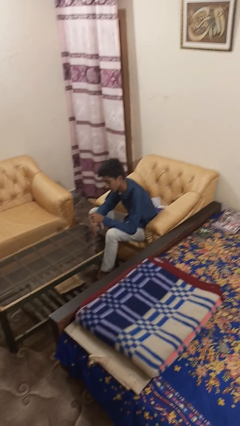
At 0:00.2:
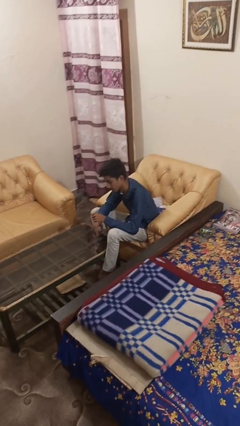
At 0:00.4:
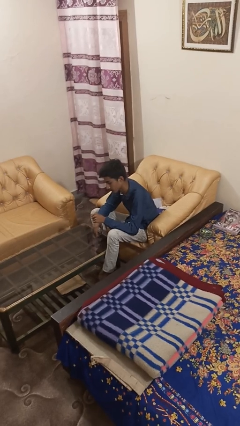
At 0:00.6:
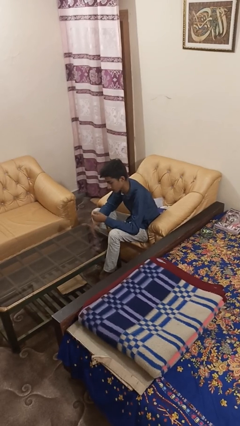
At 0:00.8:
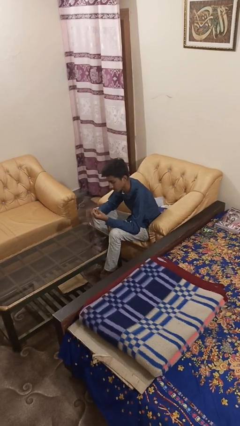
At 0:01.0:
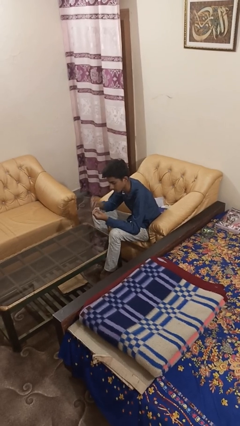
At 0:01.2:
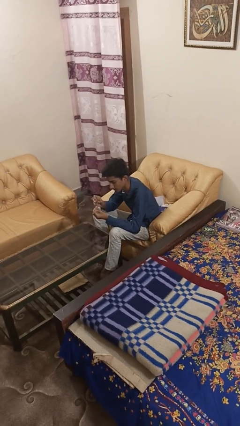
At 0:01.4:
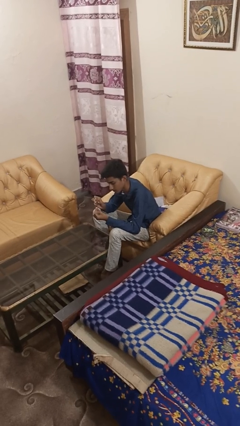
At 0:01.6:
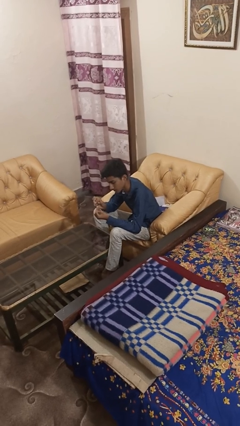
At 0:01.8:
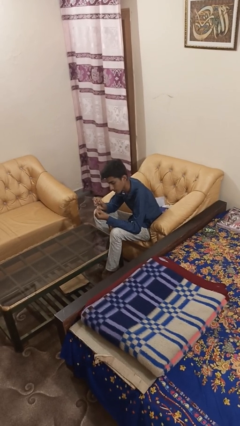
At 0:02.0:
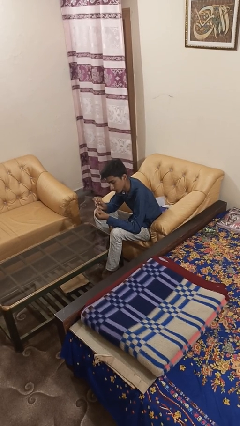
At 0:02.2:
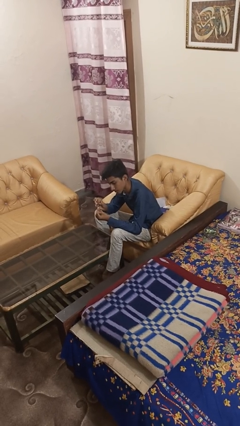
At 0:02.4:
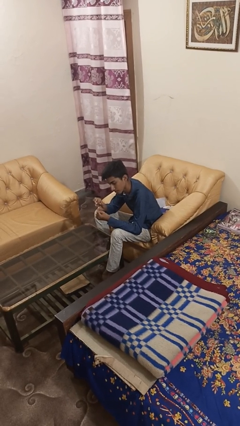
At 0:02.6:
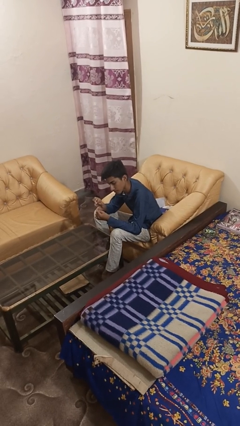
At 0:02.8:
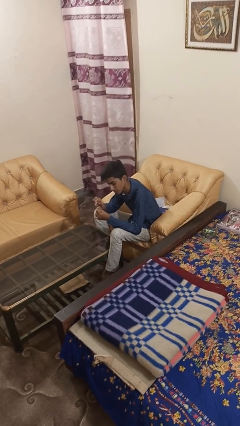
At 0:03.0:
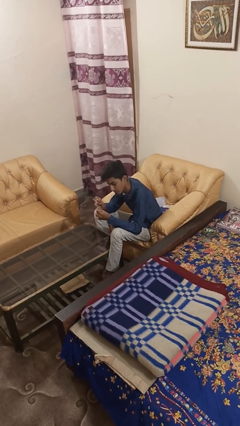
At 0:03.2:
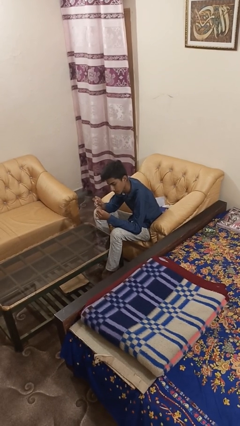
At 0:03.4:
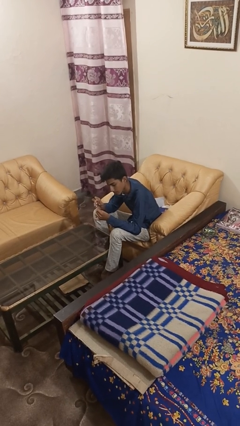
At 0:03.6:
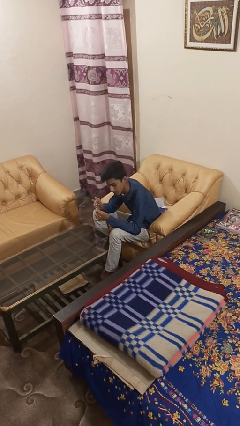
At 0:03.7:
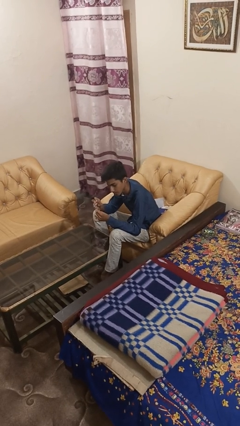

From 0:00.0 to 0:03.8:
person clips fingernails

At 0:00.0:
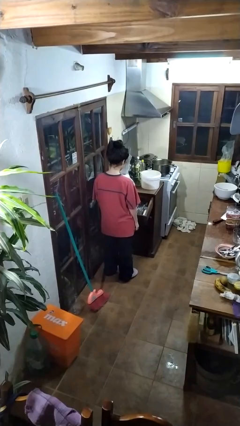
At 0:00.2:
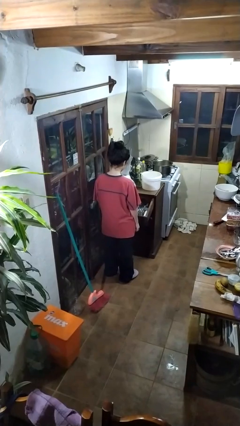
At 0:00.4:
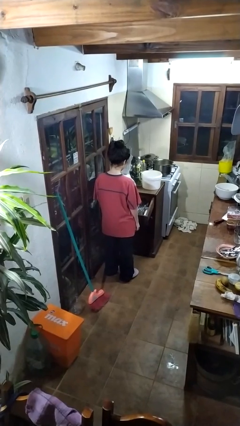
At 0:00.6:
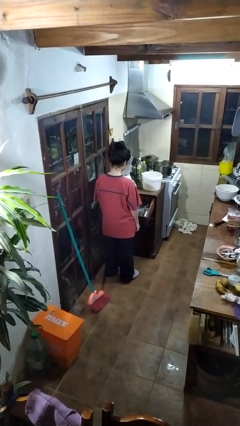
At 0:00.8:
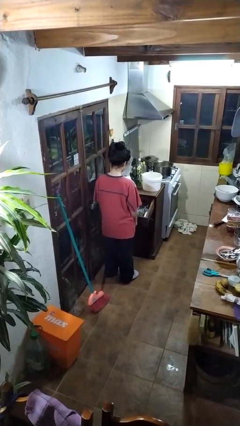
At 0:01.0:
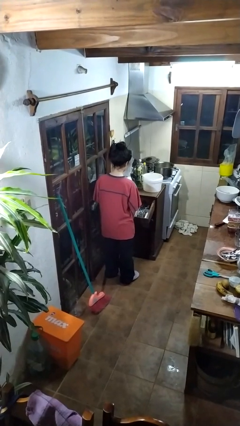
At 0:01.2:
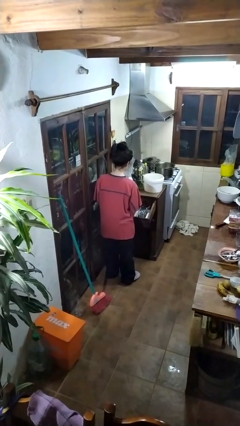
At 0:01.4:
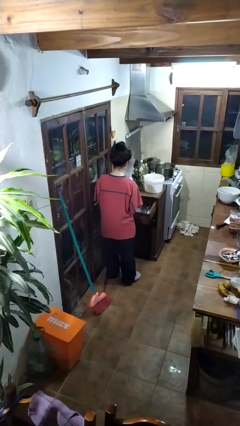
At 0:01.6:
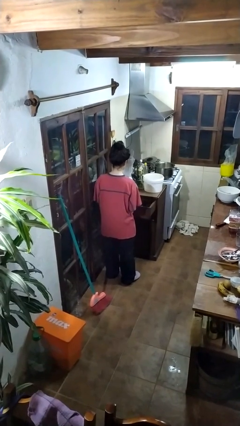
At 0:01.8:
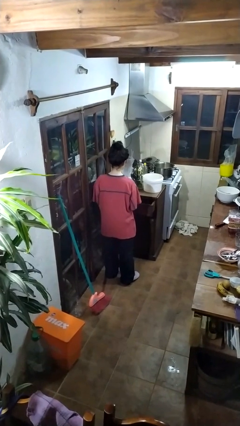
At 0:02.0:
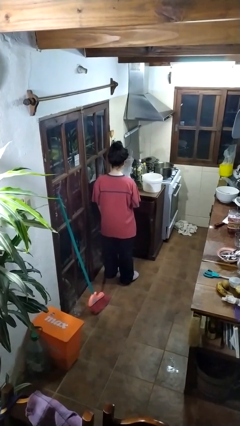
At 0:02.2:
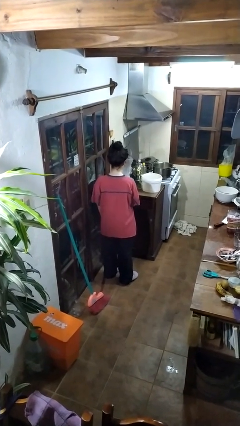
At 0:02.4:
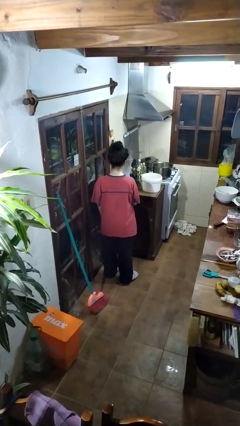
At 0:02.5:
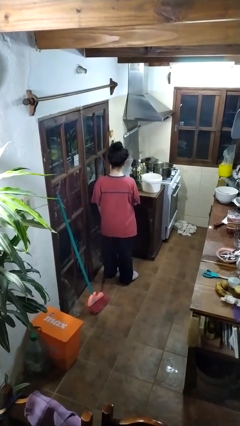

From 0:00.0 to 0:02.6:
person closes kitchen drawer

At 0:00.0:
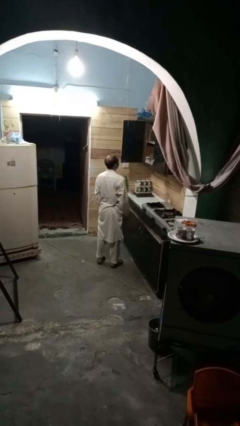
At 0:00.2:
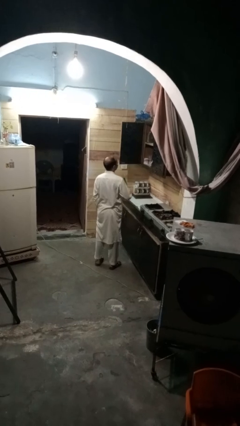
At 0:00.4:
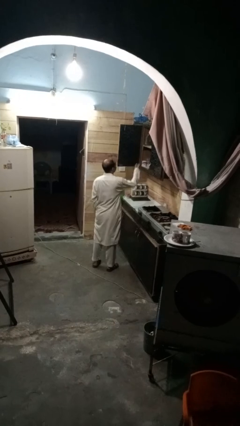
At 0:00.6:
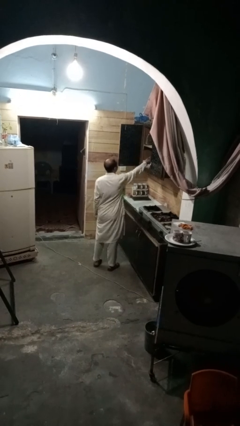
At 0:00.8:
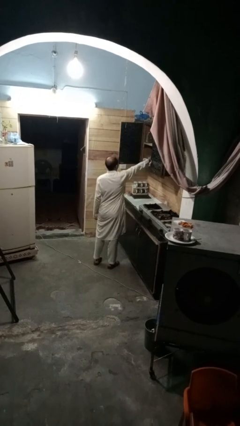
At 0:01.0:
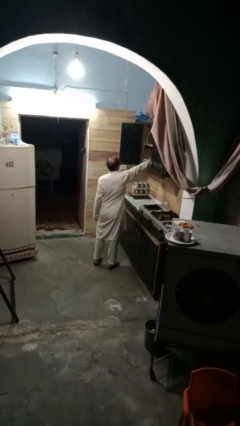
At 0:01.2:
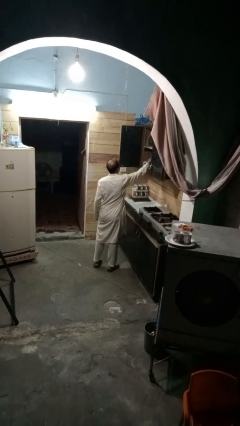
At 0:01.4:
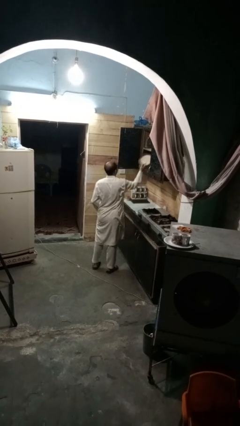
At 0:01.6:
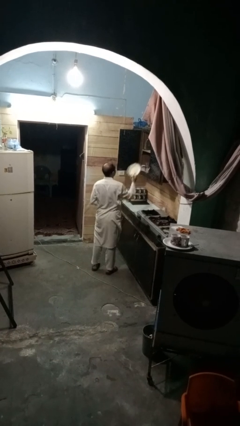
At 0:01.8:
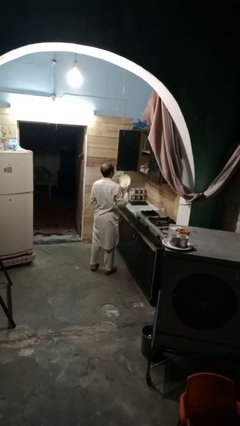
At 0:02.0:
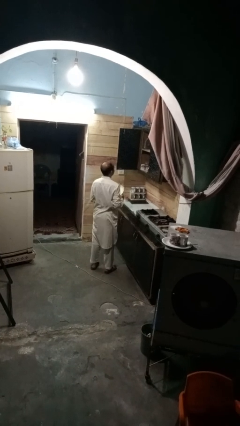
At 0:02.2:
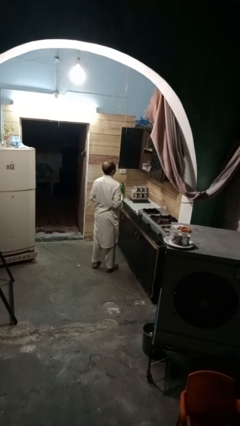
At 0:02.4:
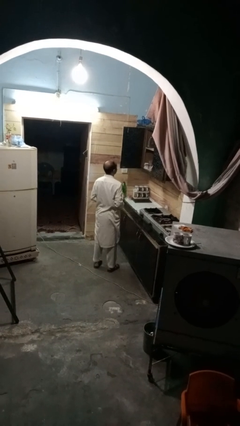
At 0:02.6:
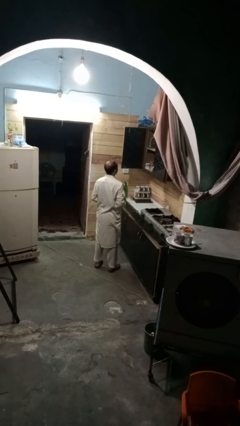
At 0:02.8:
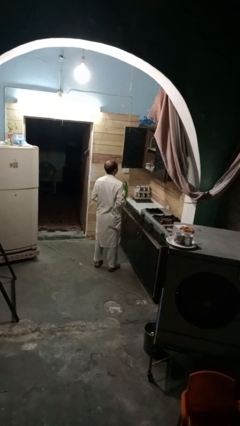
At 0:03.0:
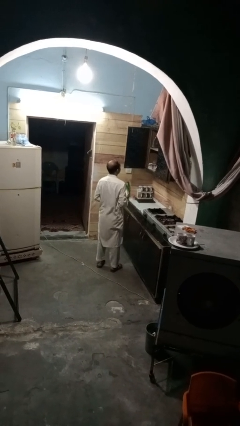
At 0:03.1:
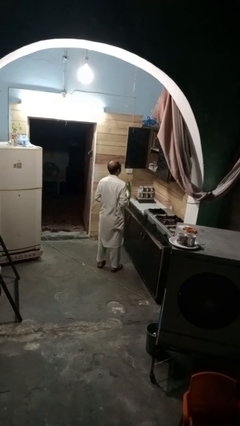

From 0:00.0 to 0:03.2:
person takes object from cabinet

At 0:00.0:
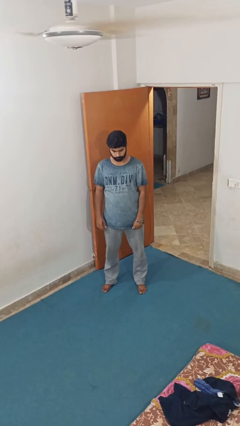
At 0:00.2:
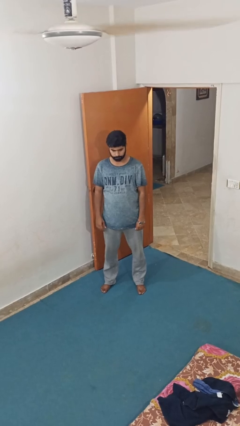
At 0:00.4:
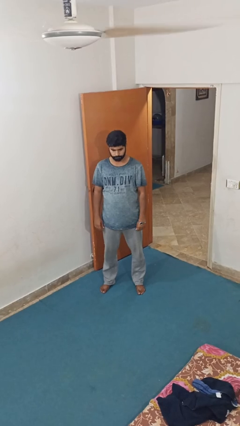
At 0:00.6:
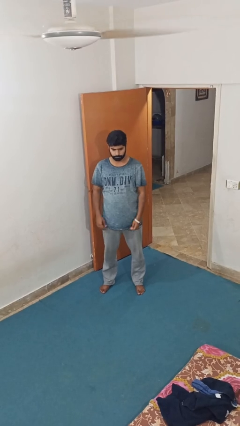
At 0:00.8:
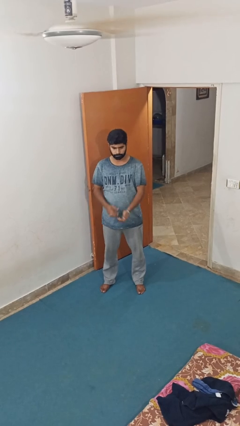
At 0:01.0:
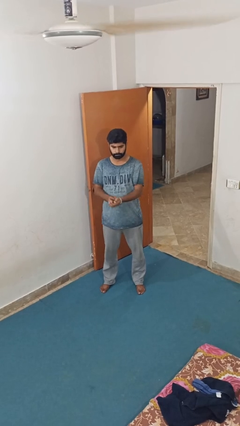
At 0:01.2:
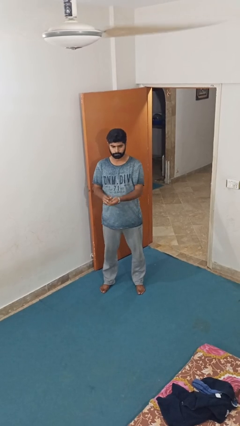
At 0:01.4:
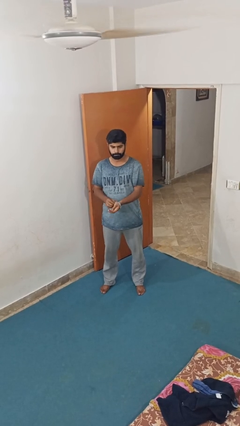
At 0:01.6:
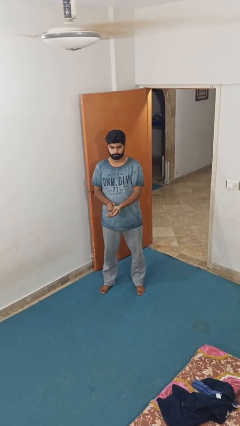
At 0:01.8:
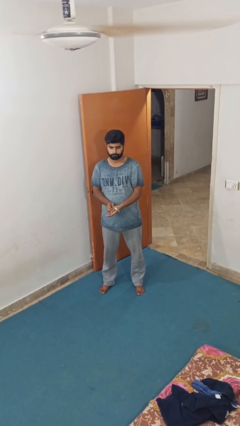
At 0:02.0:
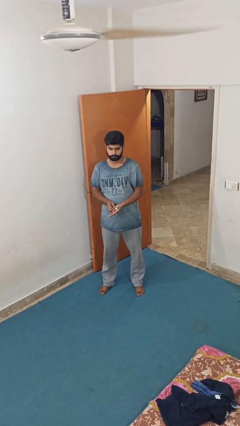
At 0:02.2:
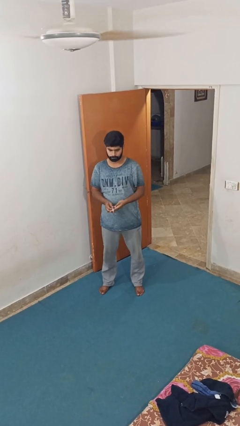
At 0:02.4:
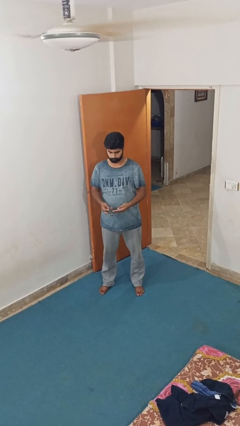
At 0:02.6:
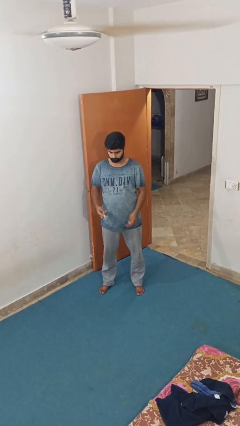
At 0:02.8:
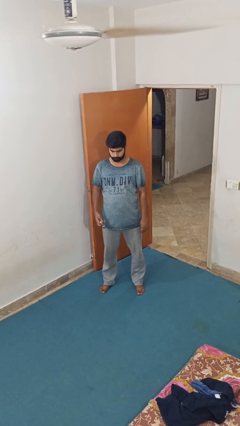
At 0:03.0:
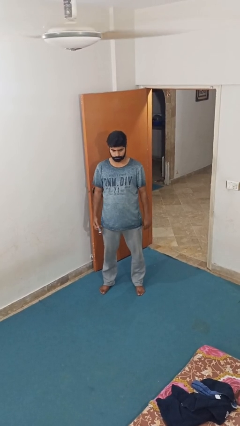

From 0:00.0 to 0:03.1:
person takes off wristwatch

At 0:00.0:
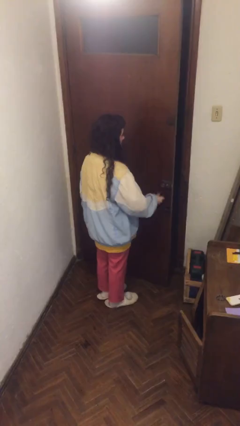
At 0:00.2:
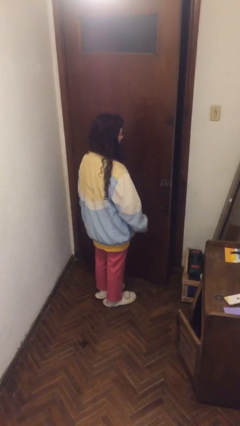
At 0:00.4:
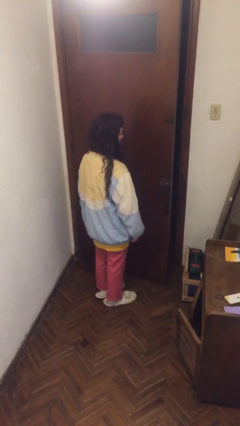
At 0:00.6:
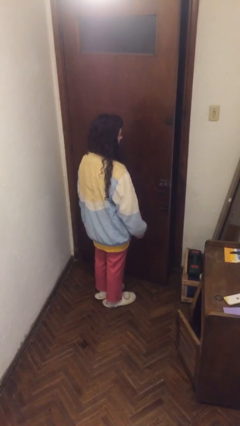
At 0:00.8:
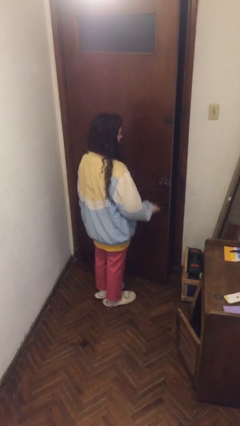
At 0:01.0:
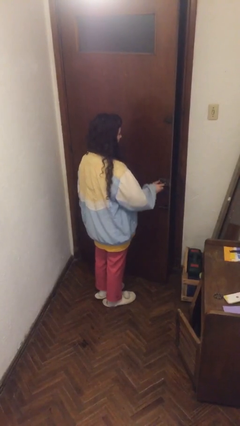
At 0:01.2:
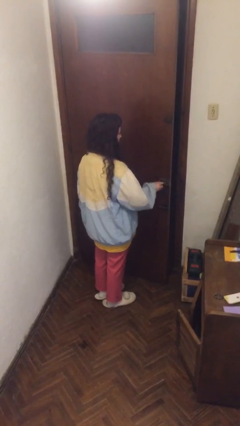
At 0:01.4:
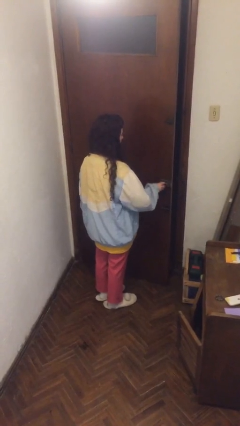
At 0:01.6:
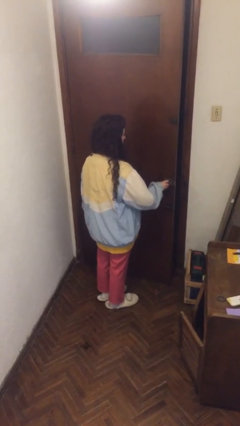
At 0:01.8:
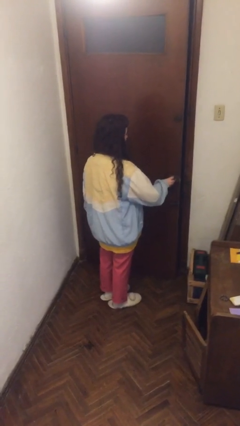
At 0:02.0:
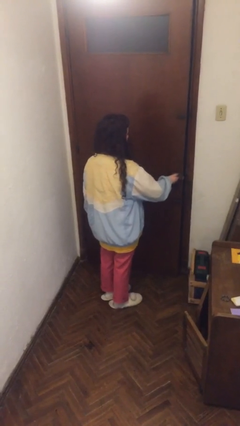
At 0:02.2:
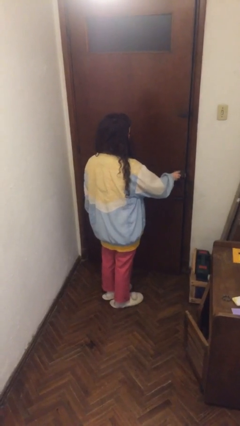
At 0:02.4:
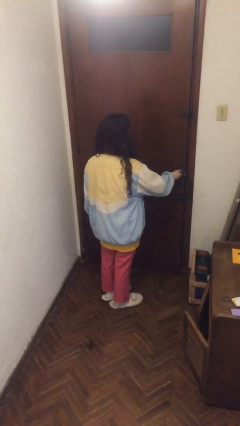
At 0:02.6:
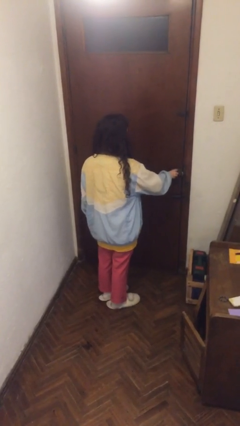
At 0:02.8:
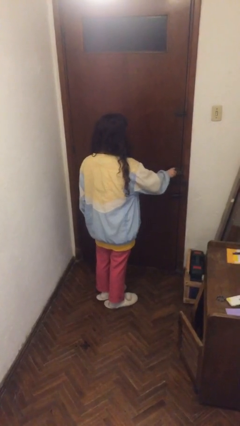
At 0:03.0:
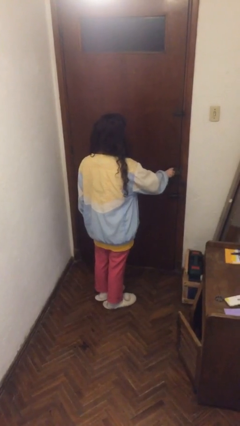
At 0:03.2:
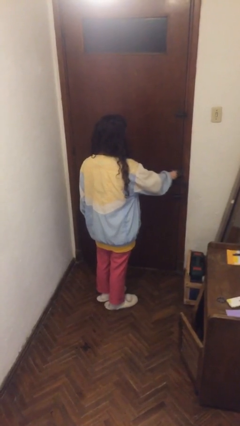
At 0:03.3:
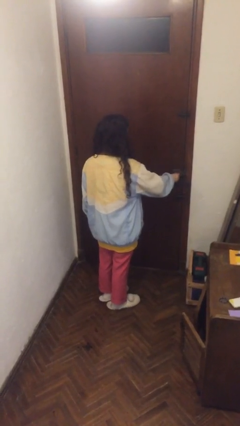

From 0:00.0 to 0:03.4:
person closes facility door

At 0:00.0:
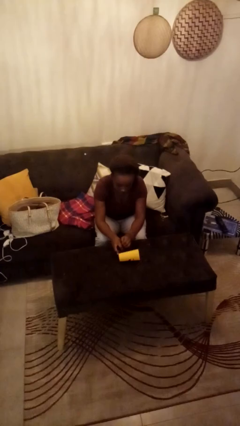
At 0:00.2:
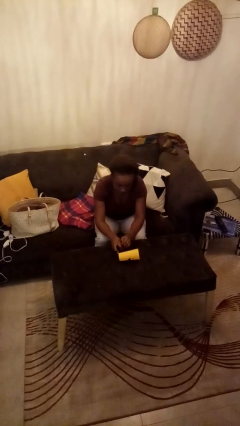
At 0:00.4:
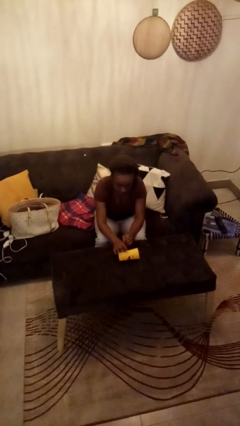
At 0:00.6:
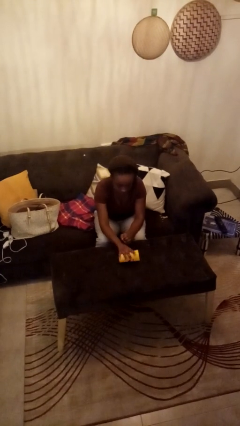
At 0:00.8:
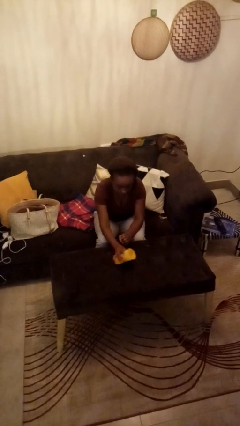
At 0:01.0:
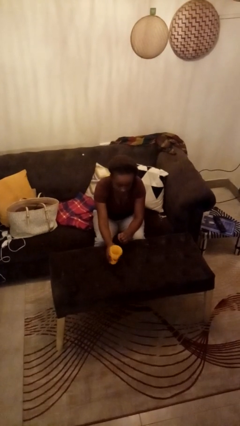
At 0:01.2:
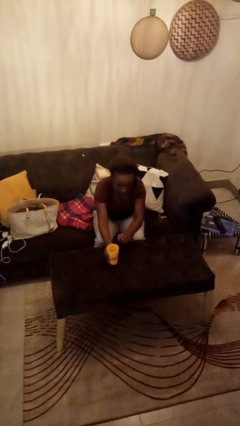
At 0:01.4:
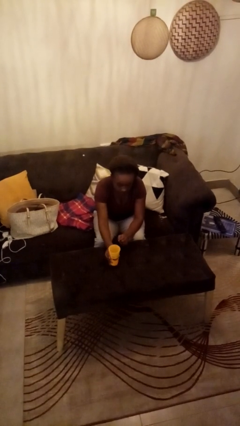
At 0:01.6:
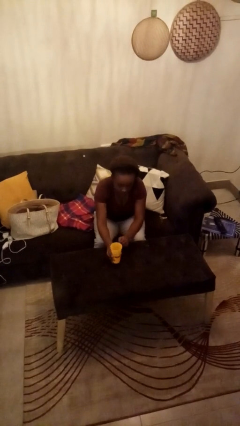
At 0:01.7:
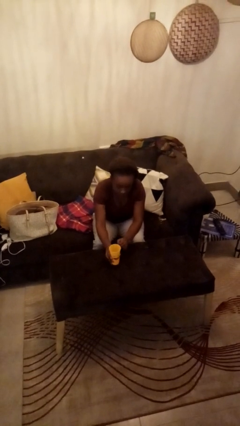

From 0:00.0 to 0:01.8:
person sets upright glass
